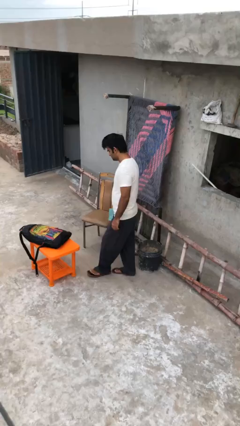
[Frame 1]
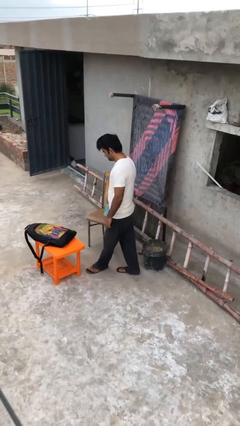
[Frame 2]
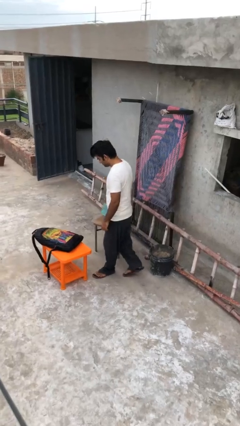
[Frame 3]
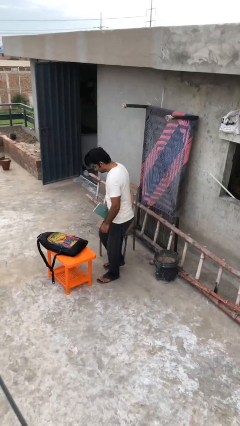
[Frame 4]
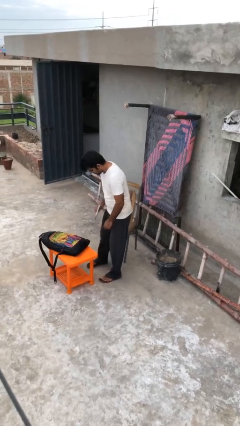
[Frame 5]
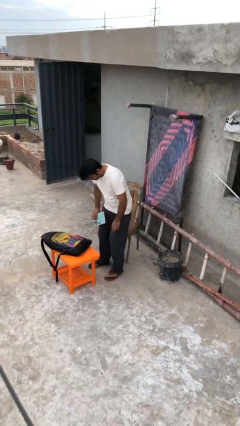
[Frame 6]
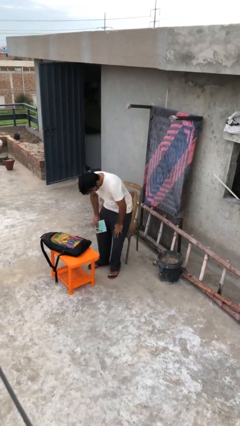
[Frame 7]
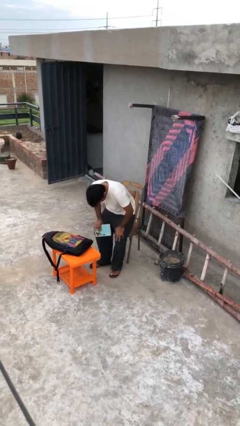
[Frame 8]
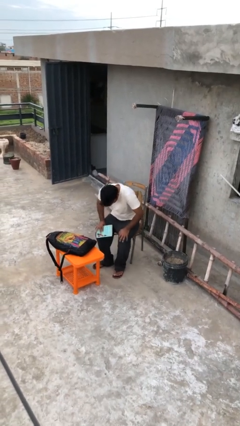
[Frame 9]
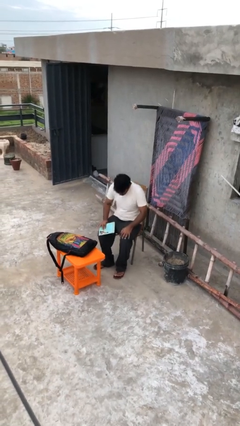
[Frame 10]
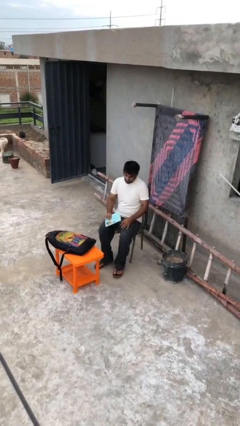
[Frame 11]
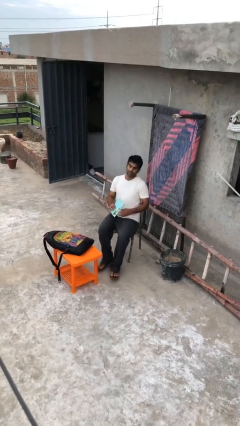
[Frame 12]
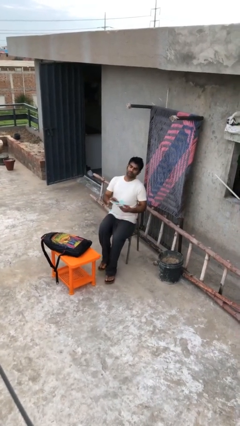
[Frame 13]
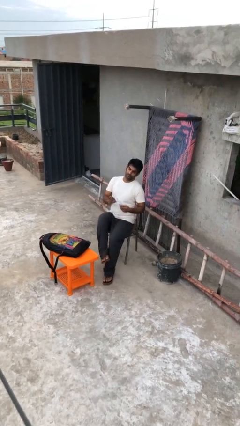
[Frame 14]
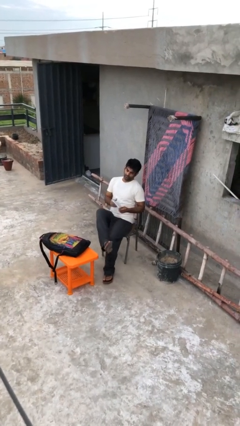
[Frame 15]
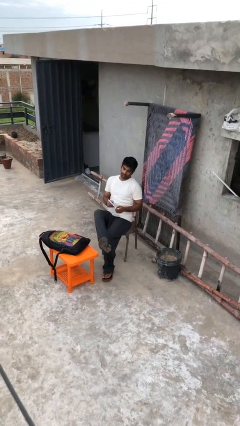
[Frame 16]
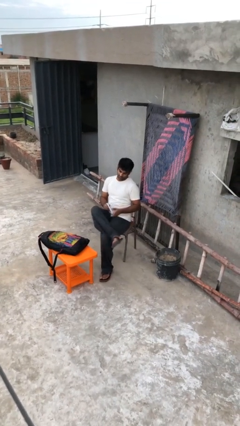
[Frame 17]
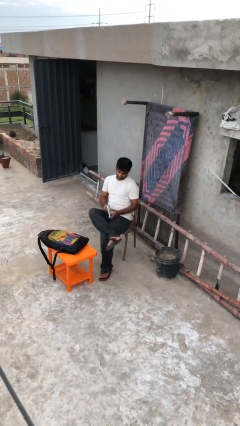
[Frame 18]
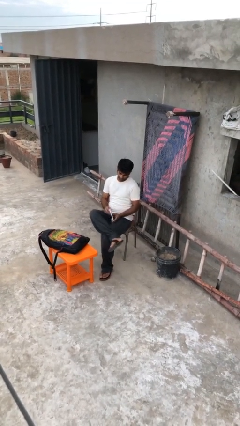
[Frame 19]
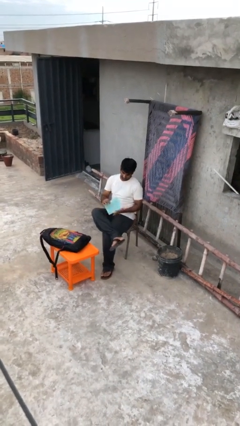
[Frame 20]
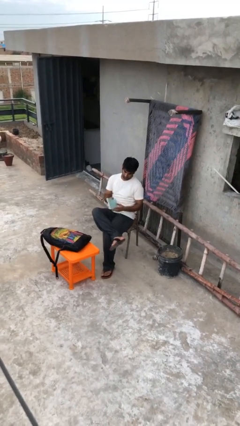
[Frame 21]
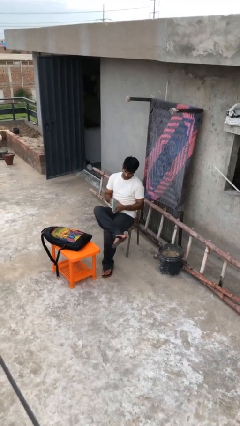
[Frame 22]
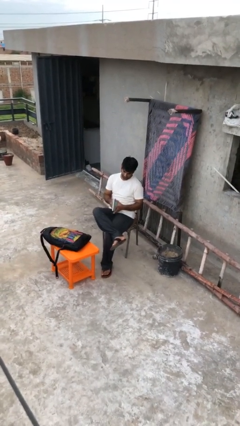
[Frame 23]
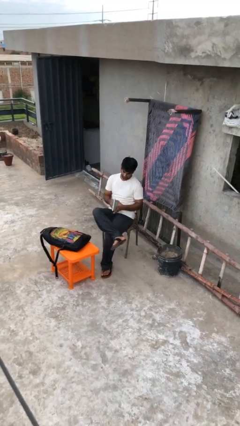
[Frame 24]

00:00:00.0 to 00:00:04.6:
person sits down

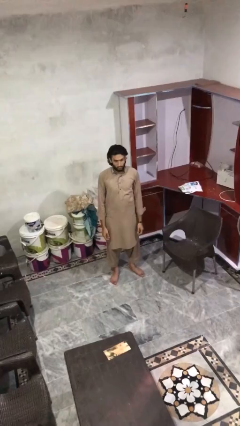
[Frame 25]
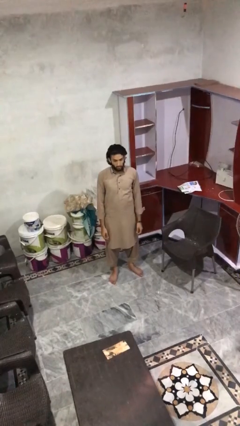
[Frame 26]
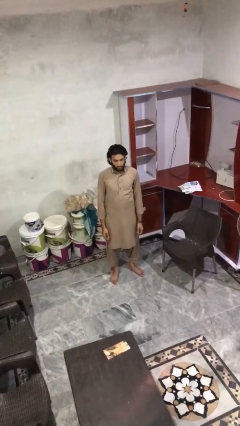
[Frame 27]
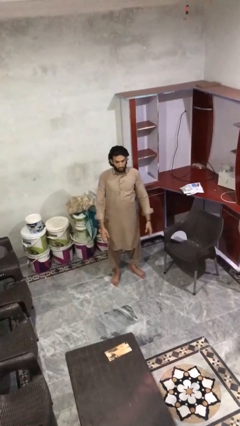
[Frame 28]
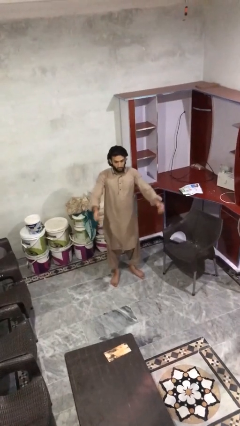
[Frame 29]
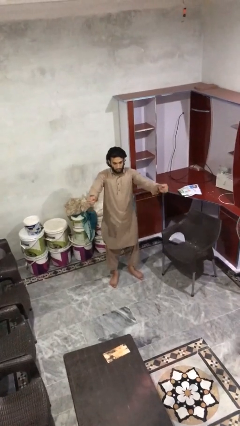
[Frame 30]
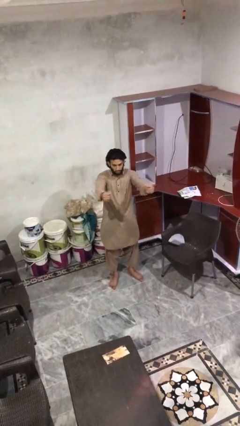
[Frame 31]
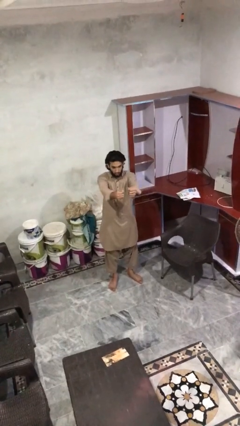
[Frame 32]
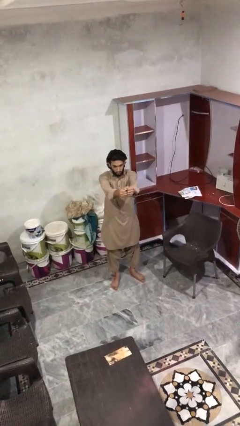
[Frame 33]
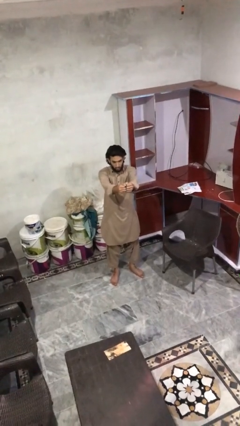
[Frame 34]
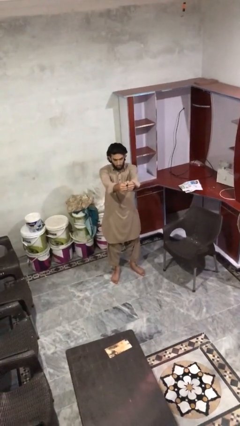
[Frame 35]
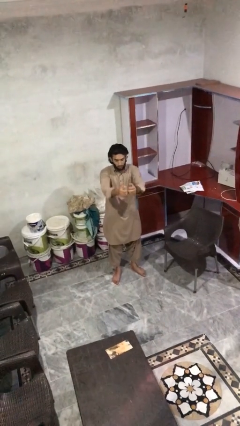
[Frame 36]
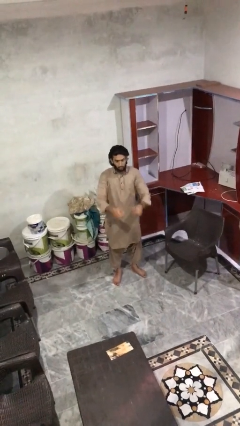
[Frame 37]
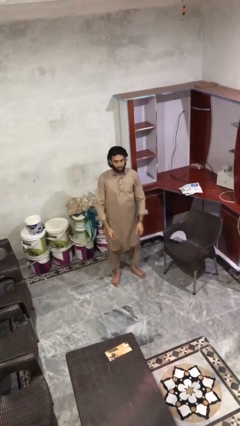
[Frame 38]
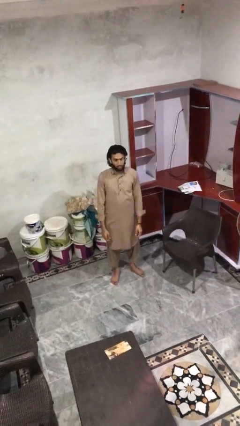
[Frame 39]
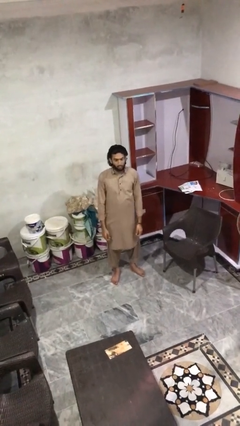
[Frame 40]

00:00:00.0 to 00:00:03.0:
person gestures zoom out

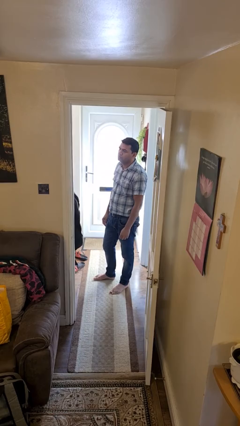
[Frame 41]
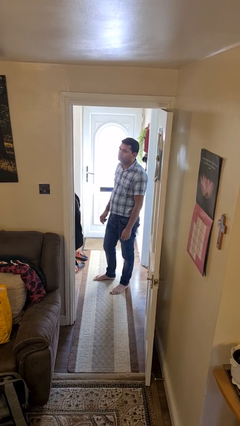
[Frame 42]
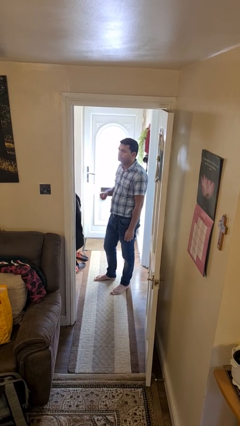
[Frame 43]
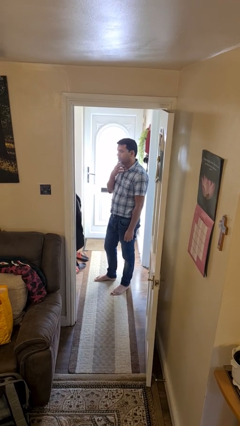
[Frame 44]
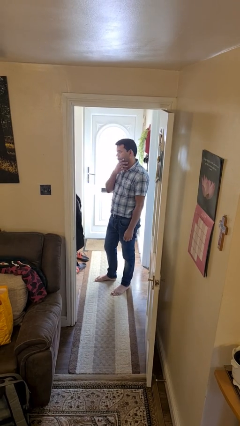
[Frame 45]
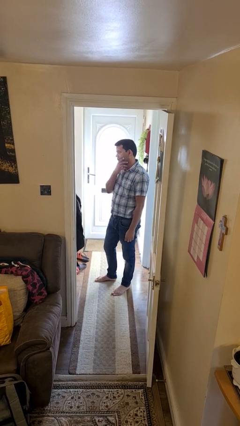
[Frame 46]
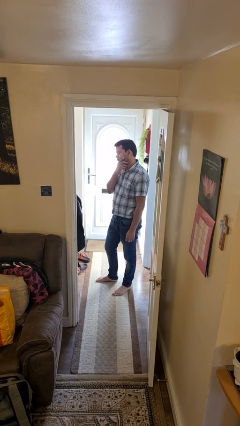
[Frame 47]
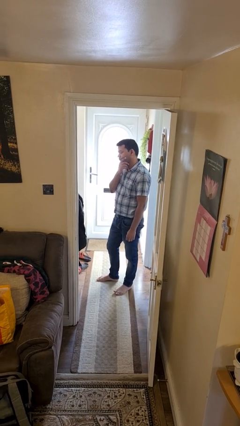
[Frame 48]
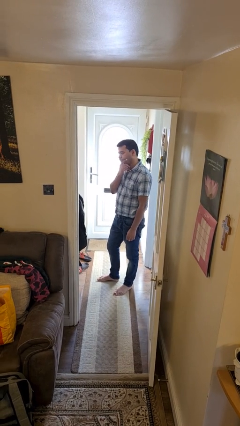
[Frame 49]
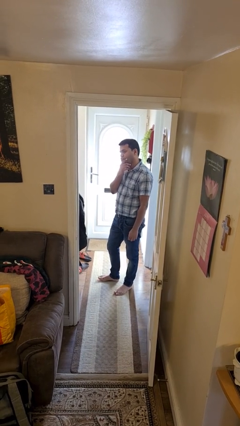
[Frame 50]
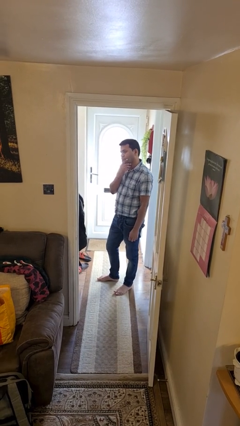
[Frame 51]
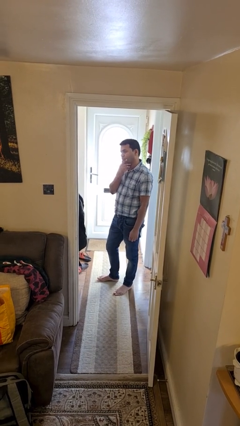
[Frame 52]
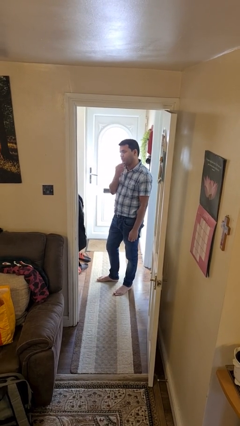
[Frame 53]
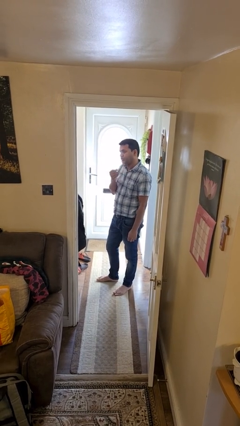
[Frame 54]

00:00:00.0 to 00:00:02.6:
person strokes chin

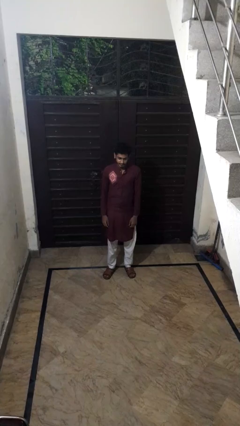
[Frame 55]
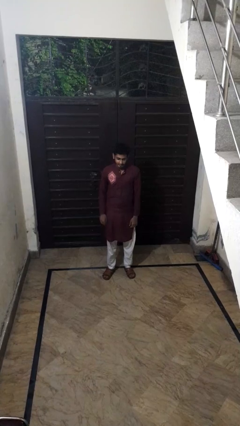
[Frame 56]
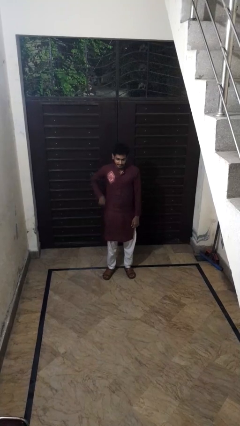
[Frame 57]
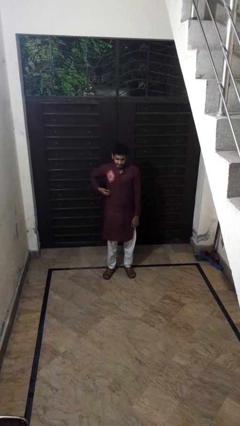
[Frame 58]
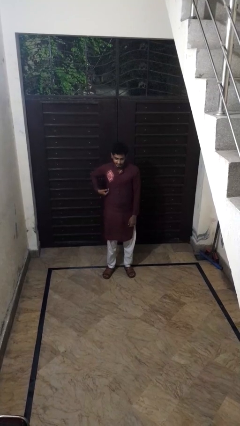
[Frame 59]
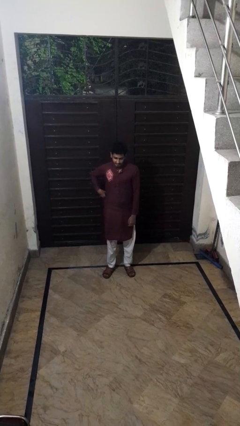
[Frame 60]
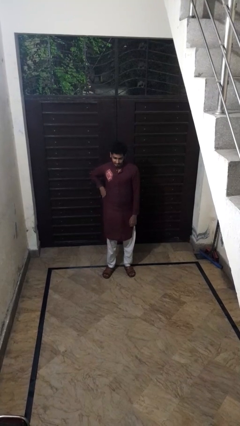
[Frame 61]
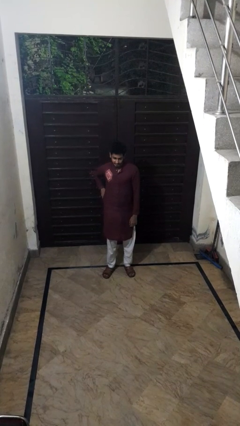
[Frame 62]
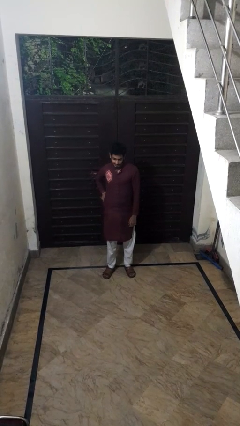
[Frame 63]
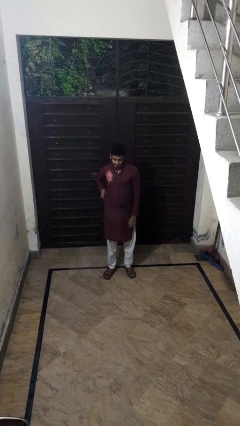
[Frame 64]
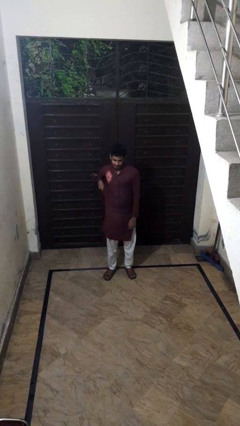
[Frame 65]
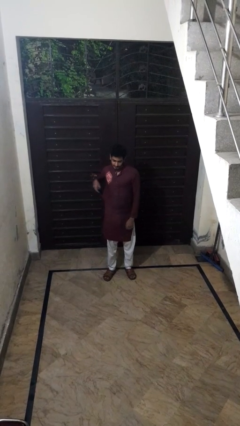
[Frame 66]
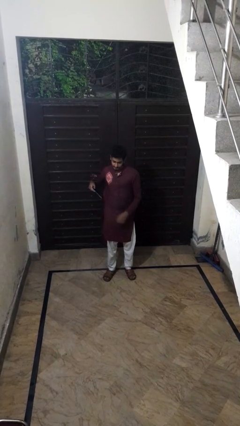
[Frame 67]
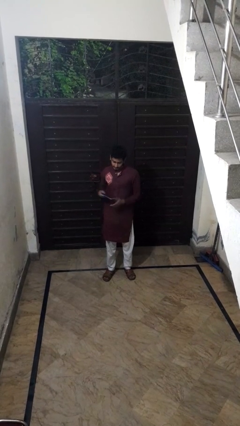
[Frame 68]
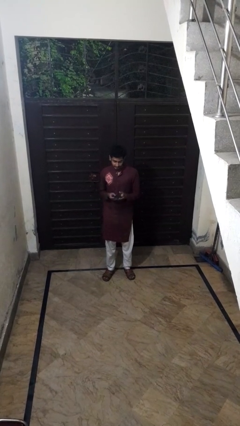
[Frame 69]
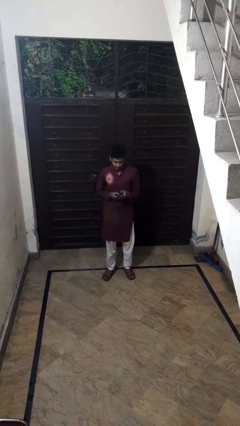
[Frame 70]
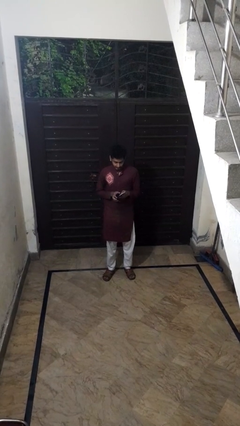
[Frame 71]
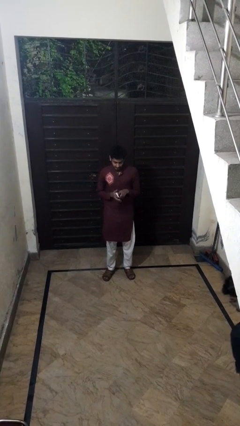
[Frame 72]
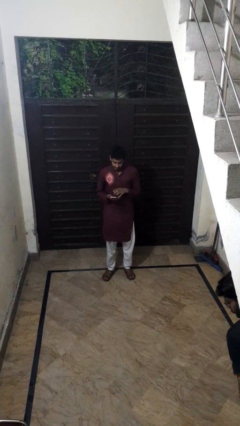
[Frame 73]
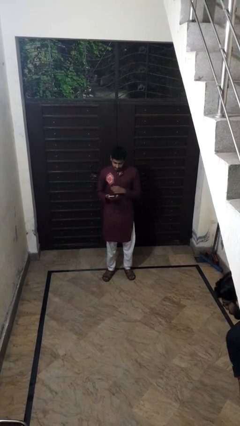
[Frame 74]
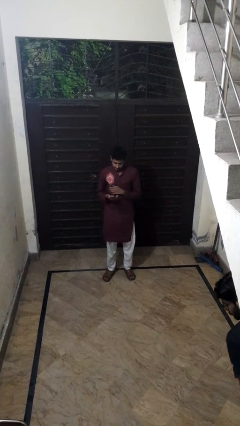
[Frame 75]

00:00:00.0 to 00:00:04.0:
person takes phone from pocket

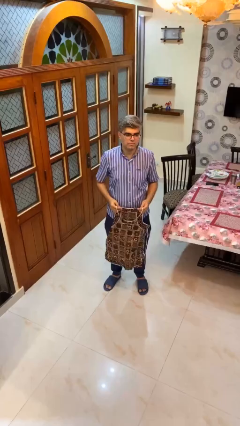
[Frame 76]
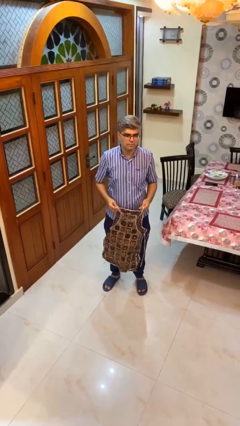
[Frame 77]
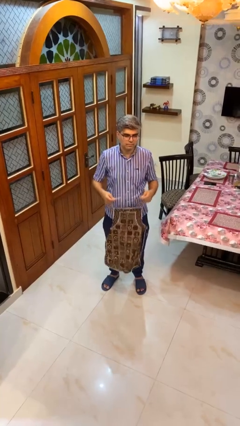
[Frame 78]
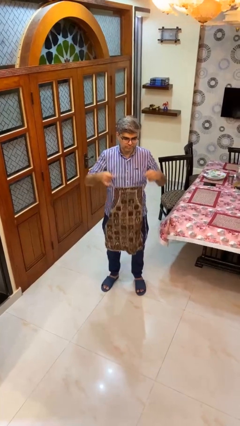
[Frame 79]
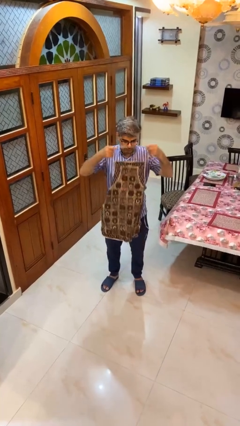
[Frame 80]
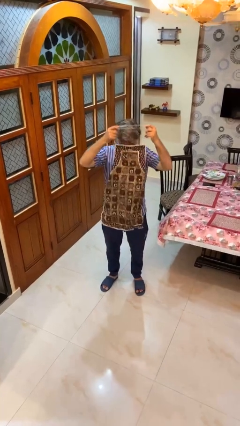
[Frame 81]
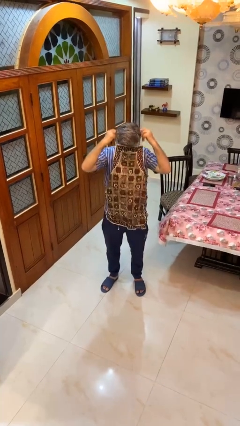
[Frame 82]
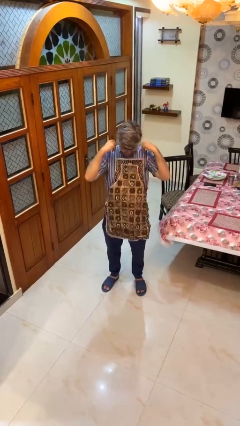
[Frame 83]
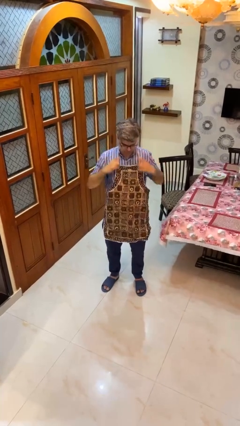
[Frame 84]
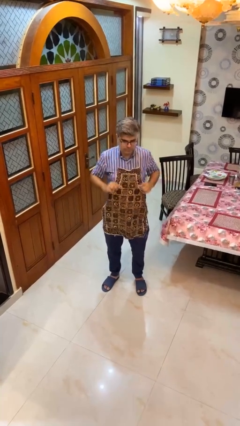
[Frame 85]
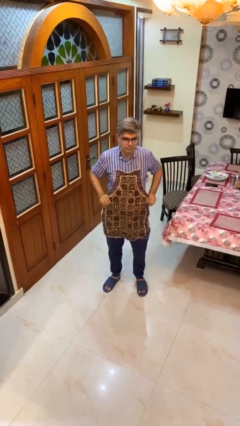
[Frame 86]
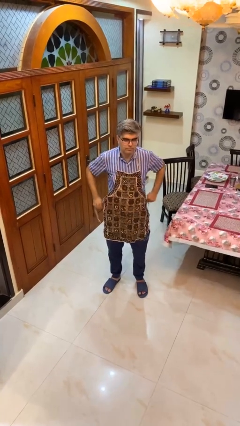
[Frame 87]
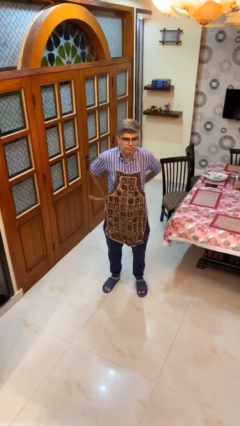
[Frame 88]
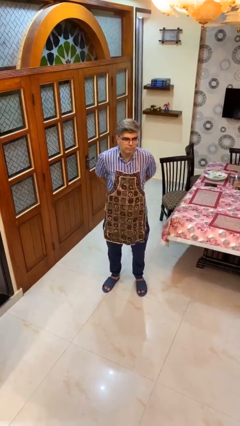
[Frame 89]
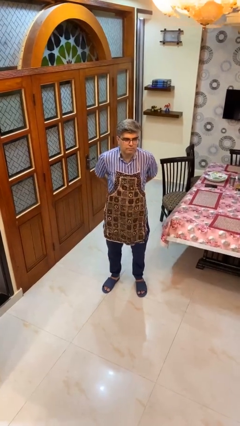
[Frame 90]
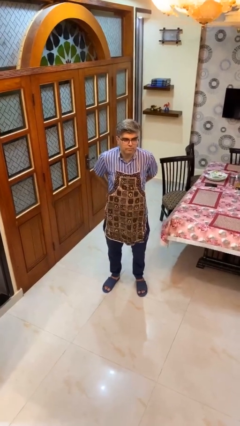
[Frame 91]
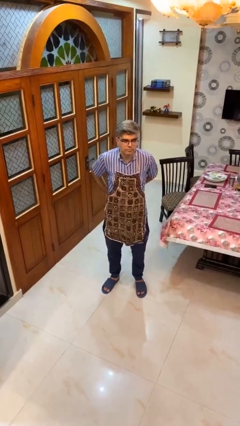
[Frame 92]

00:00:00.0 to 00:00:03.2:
person puts on apron

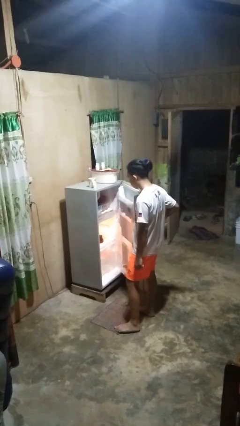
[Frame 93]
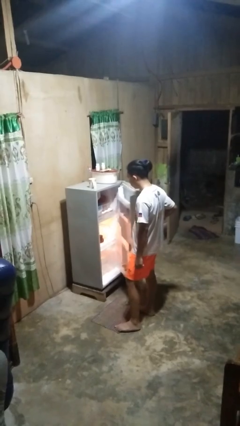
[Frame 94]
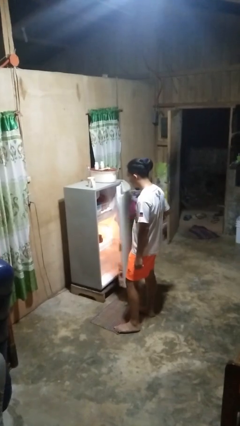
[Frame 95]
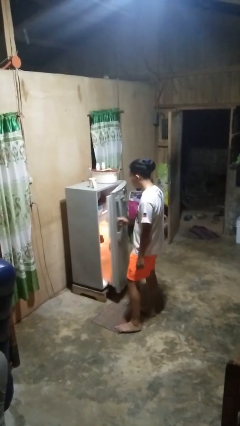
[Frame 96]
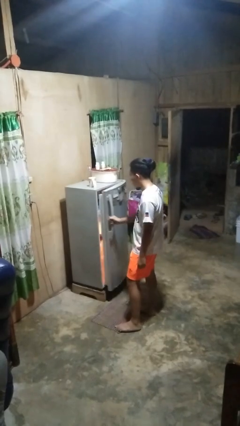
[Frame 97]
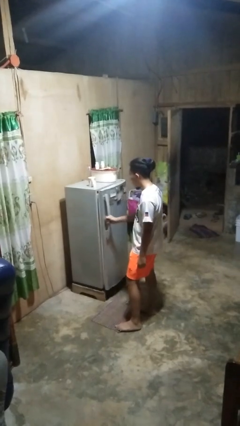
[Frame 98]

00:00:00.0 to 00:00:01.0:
person closes refrigerator
